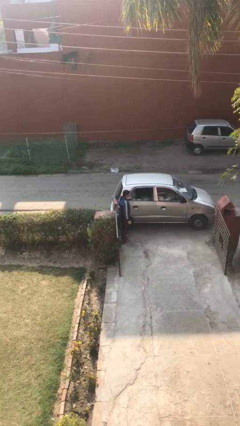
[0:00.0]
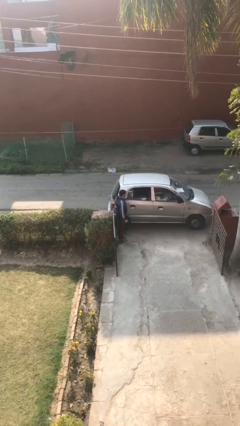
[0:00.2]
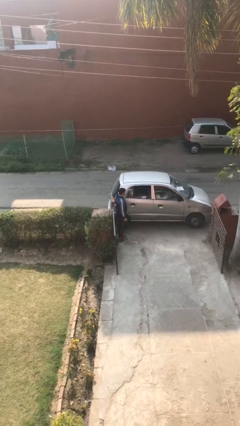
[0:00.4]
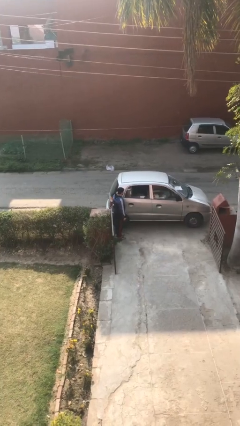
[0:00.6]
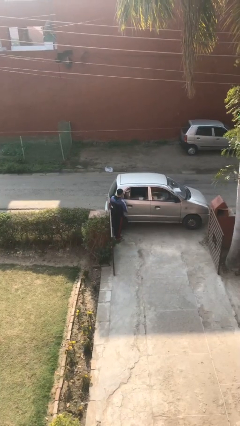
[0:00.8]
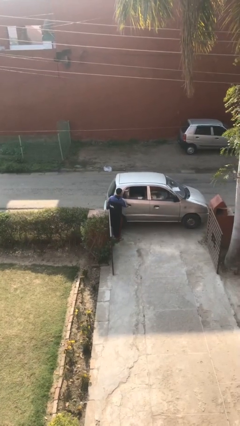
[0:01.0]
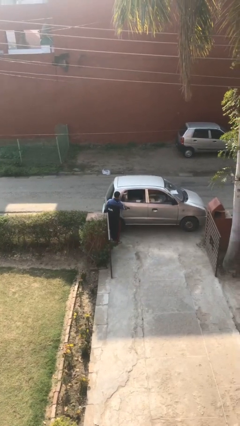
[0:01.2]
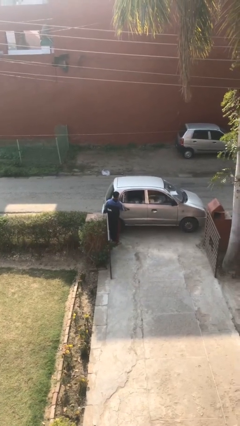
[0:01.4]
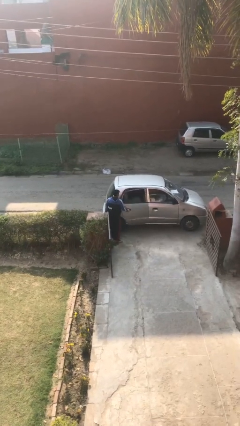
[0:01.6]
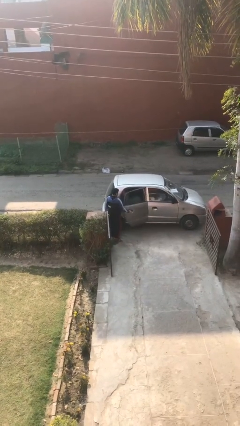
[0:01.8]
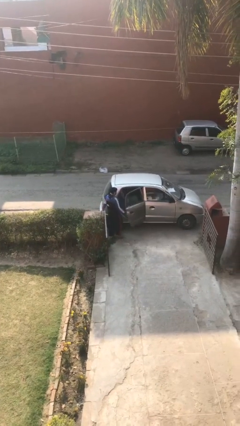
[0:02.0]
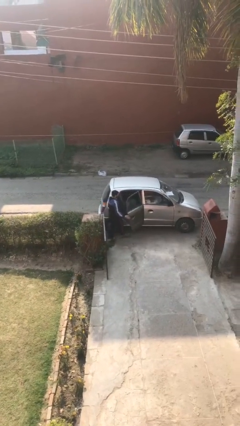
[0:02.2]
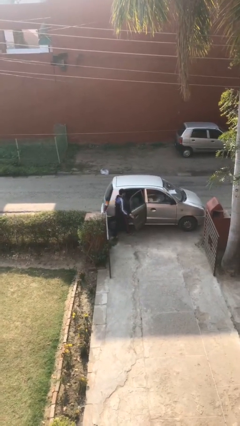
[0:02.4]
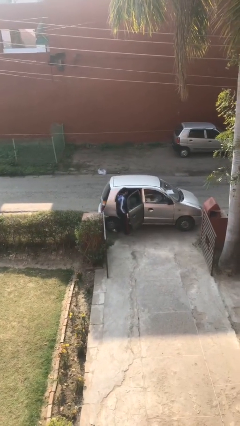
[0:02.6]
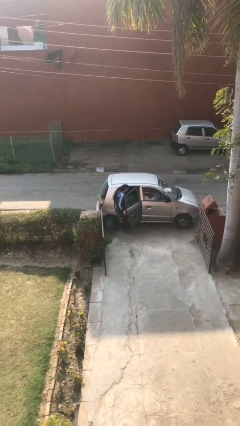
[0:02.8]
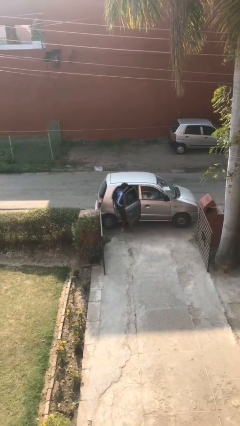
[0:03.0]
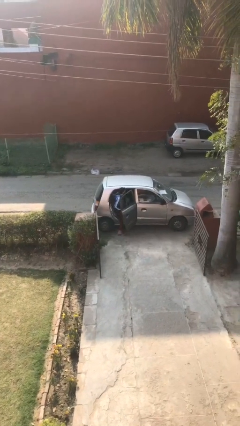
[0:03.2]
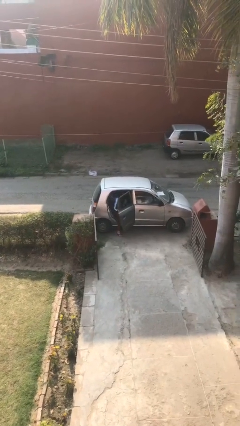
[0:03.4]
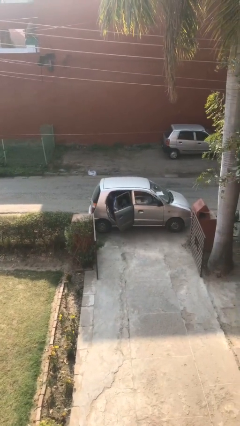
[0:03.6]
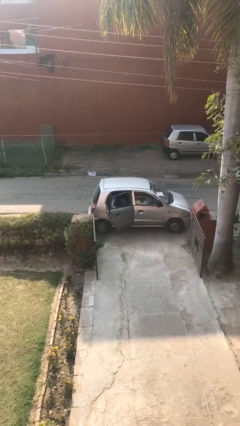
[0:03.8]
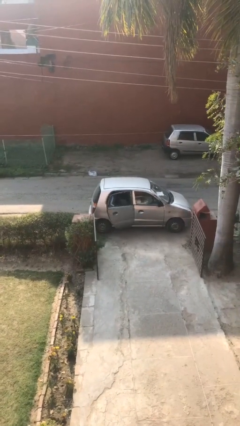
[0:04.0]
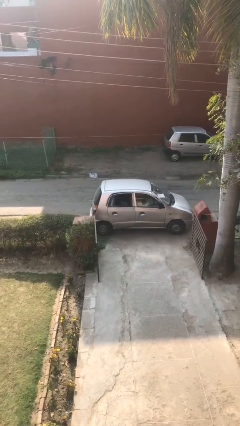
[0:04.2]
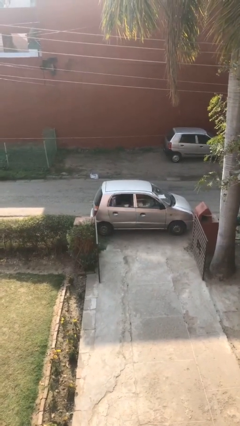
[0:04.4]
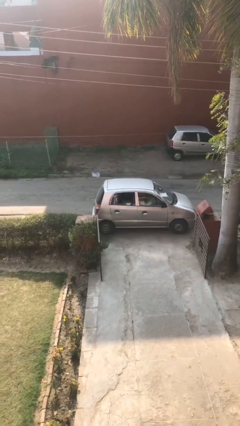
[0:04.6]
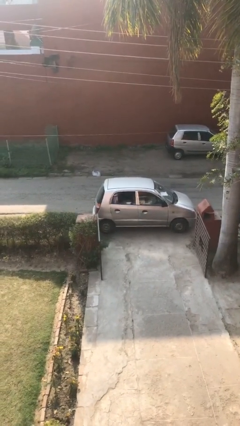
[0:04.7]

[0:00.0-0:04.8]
car picks up person

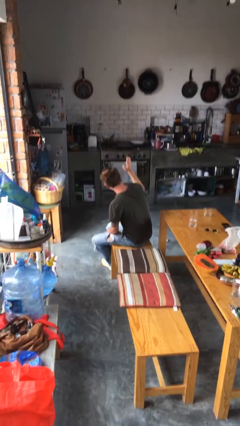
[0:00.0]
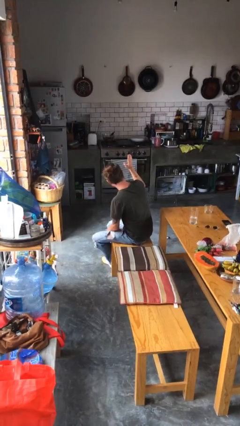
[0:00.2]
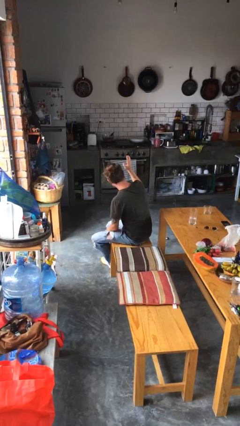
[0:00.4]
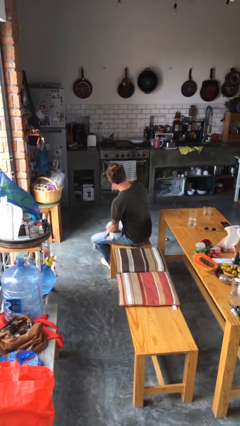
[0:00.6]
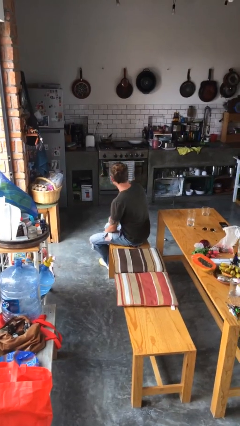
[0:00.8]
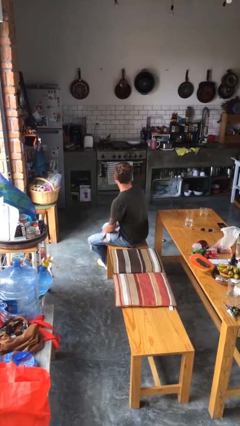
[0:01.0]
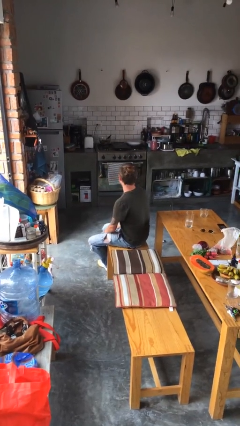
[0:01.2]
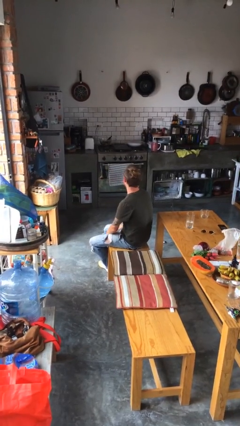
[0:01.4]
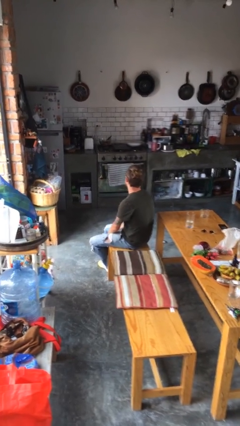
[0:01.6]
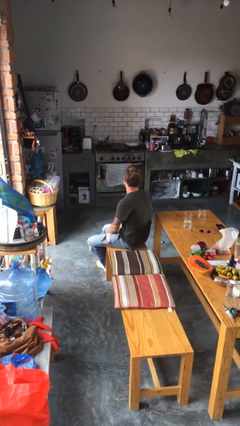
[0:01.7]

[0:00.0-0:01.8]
person gestures lower hand

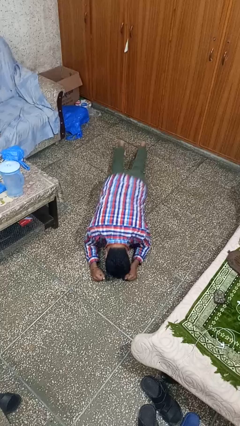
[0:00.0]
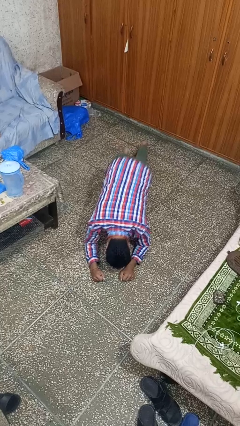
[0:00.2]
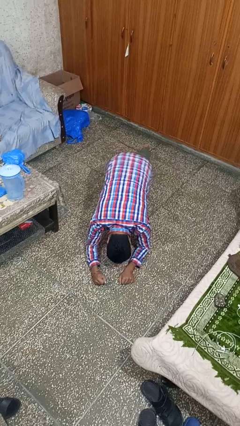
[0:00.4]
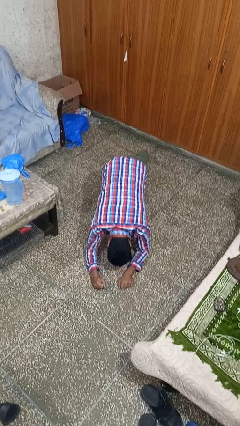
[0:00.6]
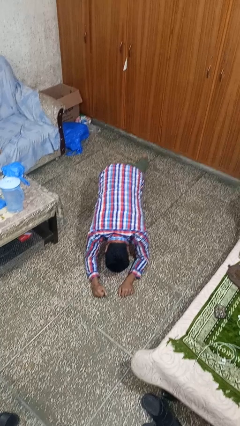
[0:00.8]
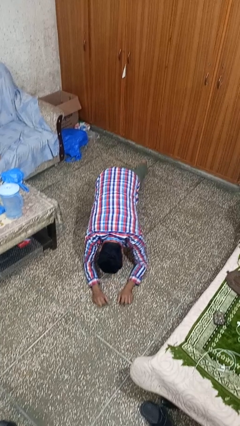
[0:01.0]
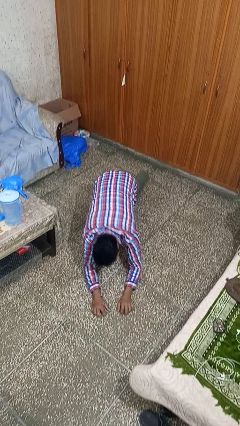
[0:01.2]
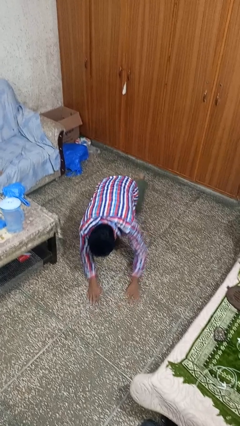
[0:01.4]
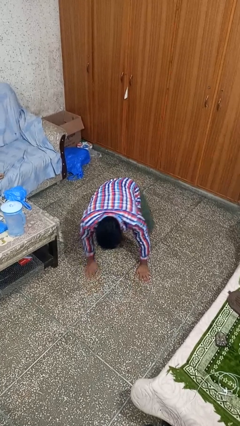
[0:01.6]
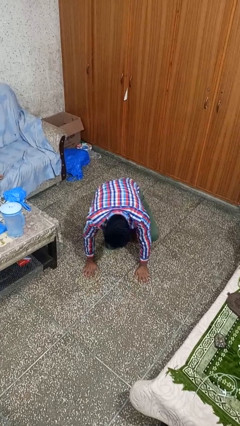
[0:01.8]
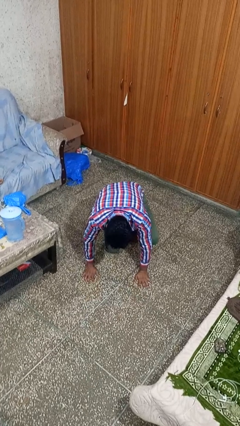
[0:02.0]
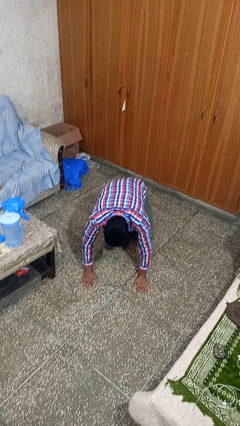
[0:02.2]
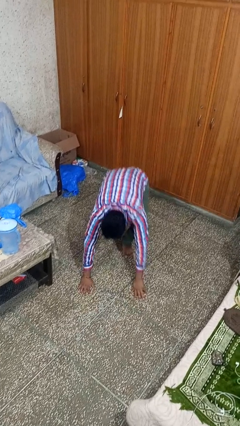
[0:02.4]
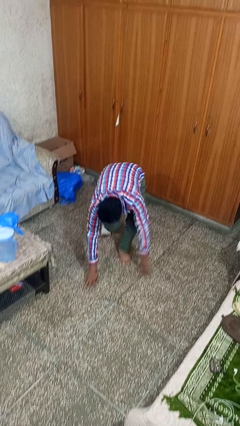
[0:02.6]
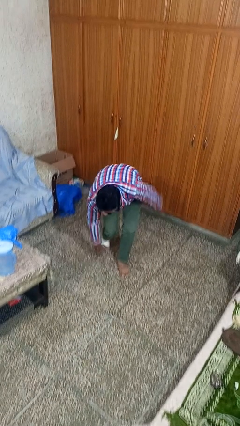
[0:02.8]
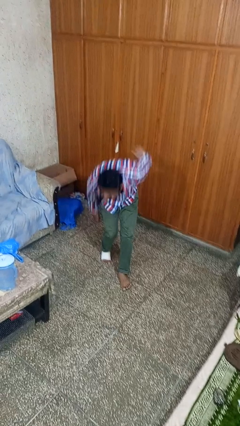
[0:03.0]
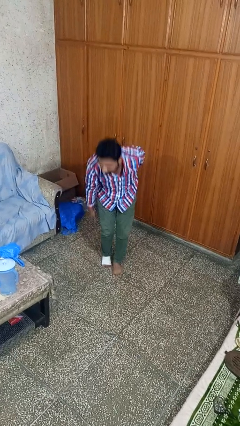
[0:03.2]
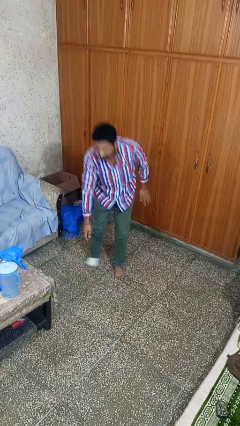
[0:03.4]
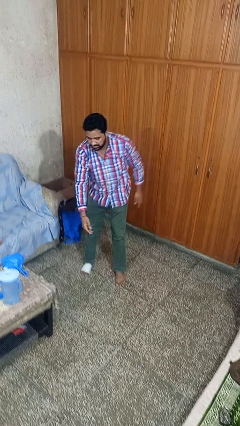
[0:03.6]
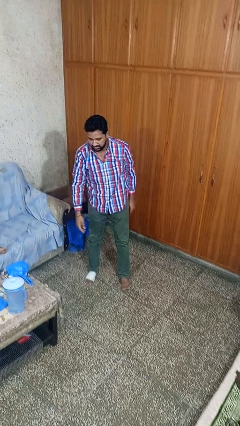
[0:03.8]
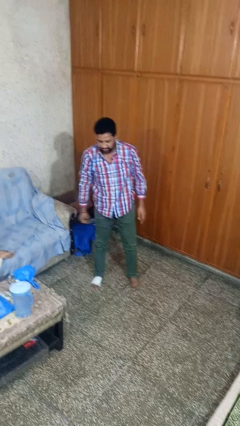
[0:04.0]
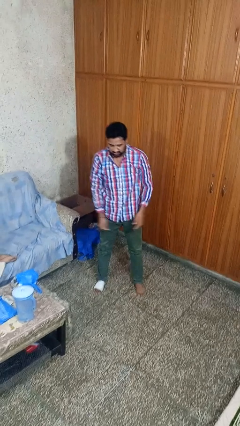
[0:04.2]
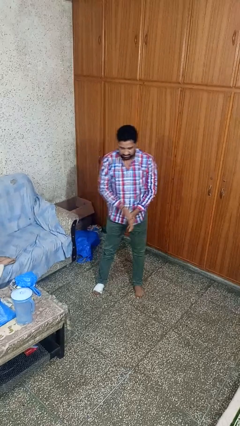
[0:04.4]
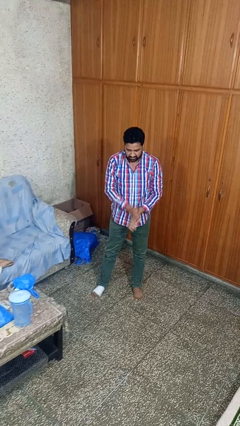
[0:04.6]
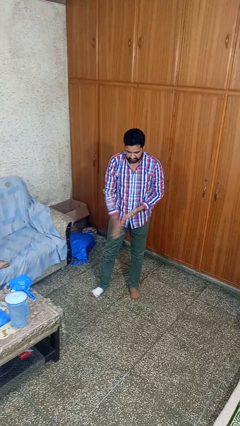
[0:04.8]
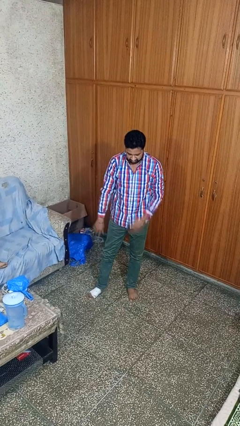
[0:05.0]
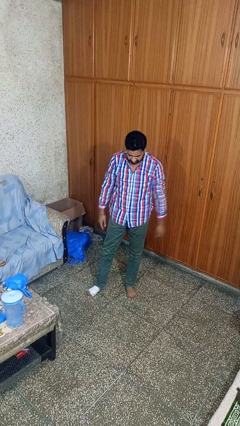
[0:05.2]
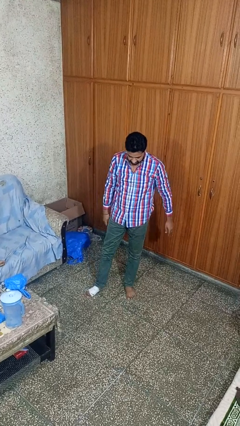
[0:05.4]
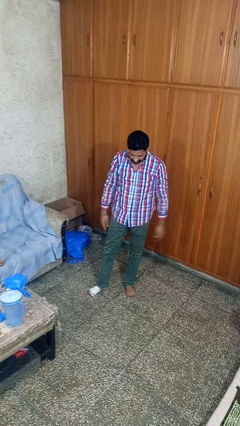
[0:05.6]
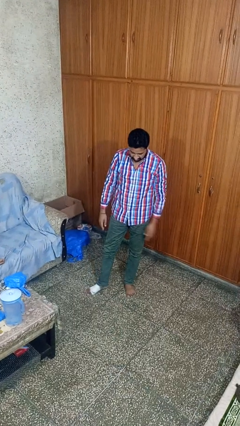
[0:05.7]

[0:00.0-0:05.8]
person stands up from floor

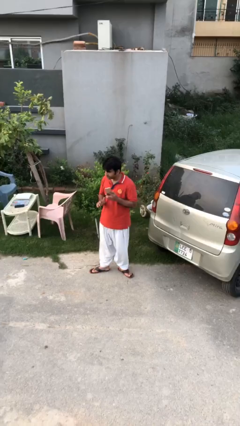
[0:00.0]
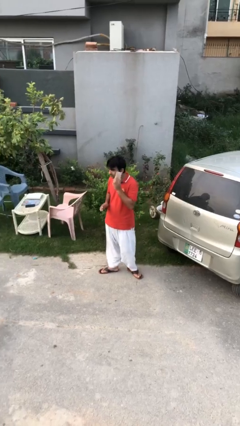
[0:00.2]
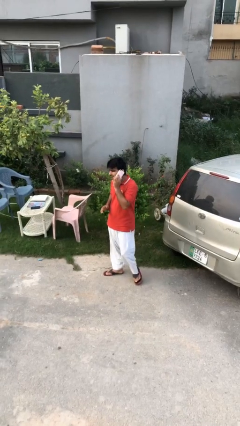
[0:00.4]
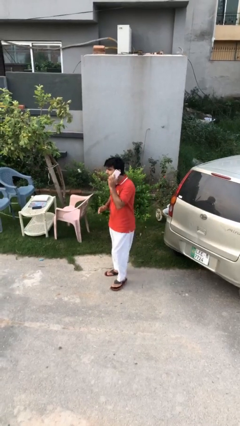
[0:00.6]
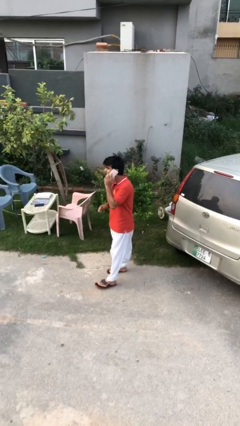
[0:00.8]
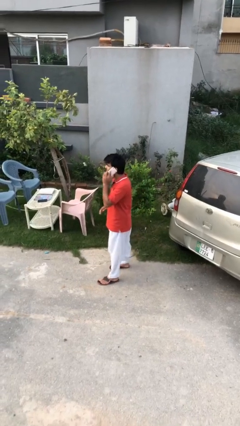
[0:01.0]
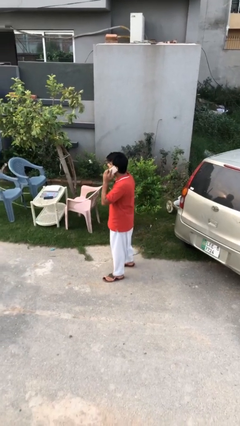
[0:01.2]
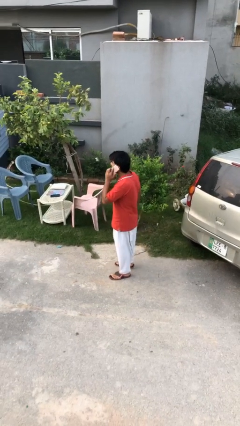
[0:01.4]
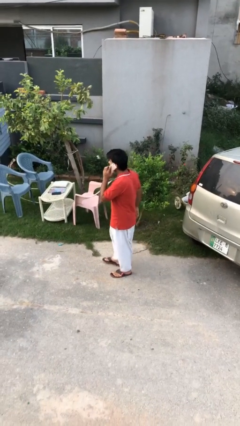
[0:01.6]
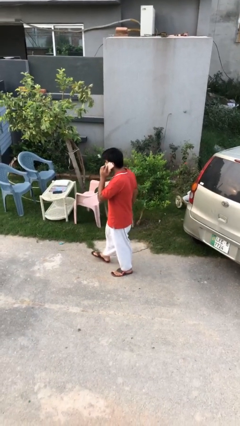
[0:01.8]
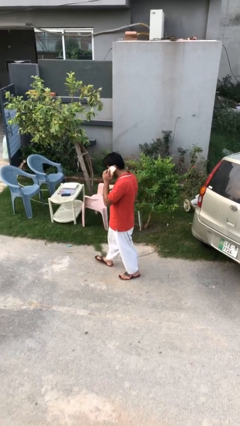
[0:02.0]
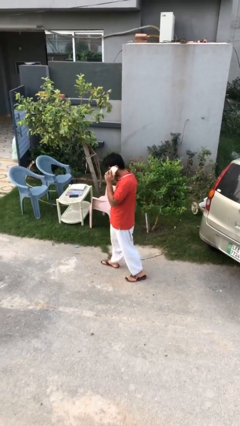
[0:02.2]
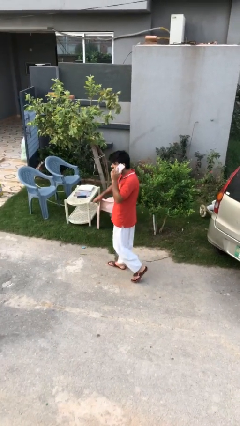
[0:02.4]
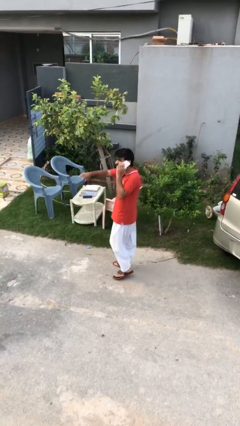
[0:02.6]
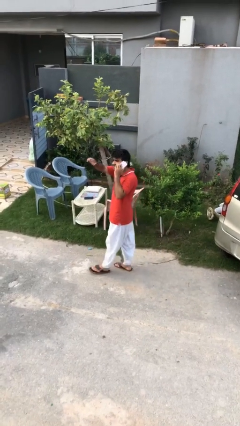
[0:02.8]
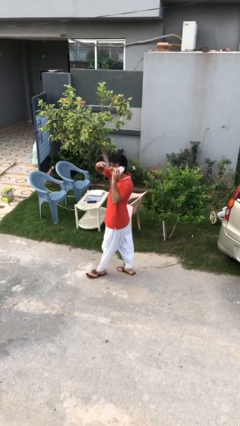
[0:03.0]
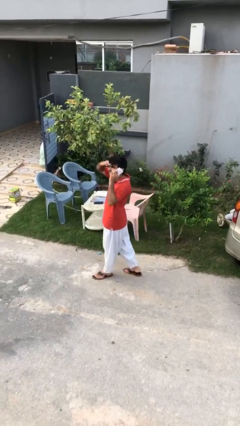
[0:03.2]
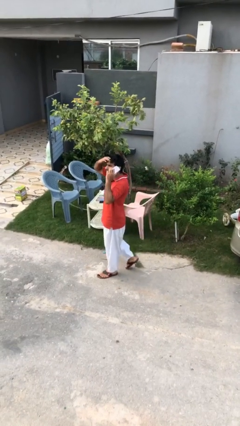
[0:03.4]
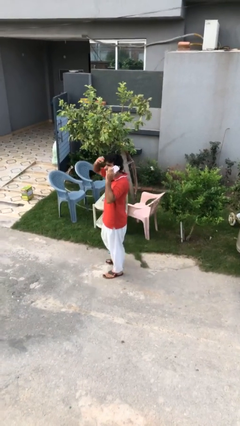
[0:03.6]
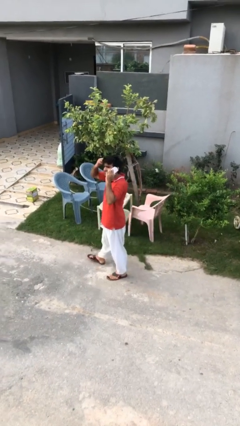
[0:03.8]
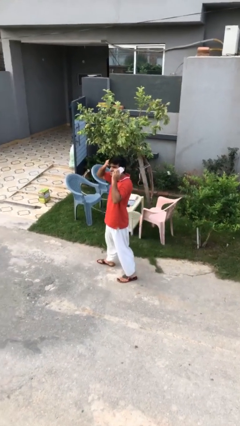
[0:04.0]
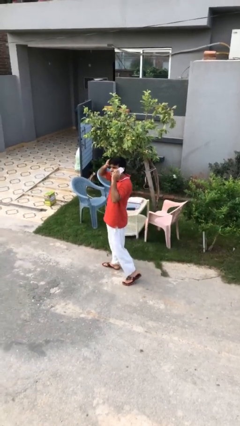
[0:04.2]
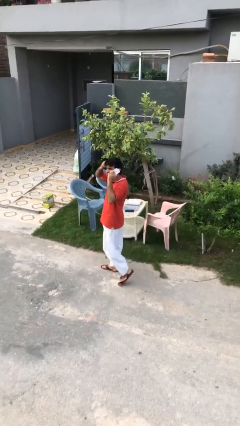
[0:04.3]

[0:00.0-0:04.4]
person talks on phone

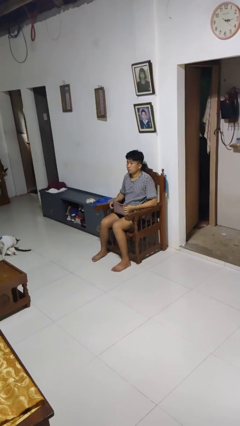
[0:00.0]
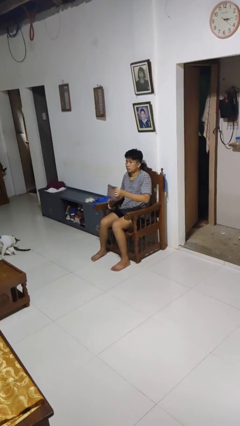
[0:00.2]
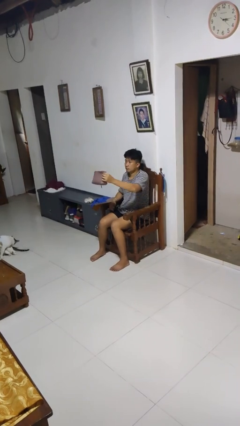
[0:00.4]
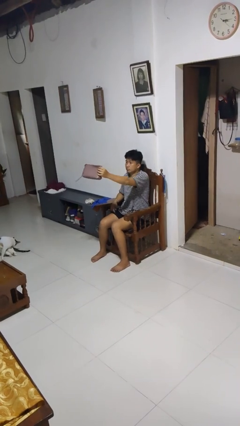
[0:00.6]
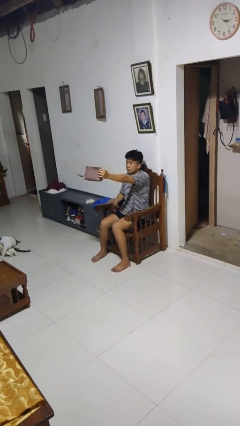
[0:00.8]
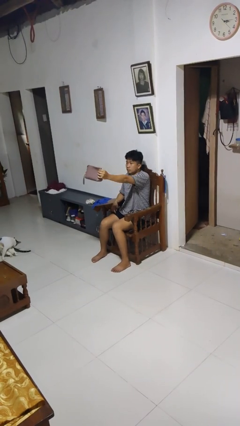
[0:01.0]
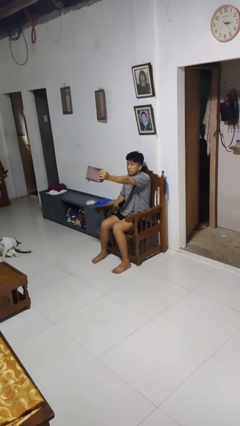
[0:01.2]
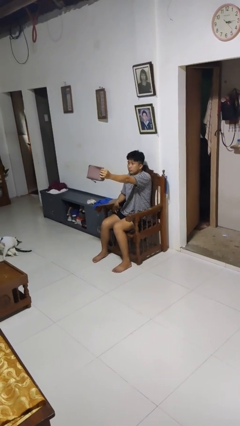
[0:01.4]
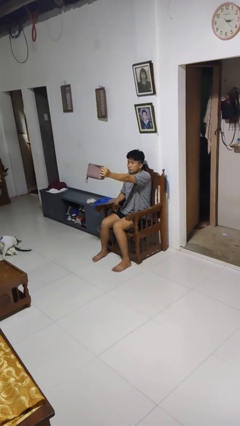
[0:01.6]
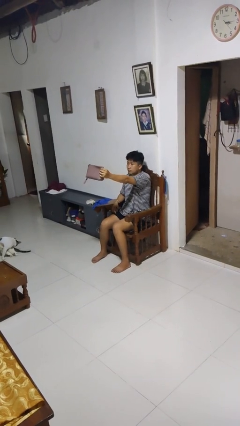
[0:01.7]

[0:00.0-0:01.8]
person holds object above head
